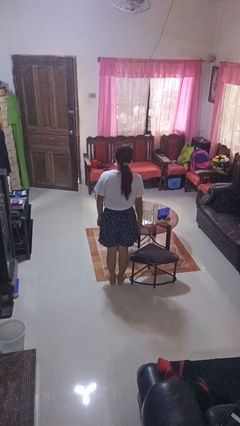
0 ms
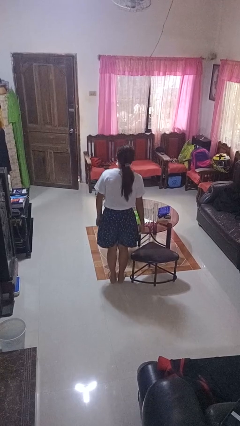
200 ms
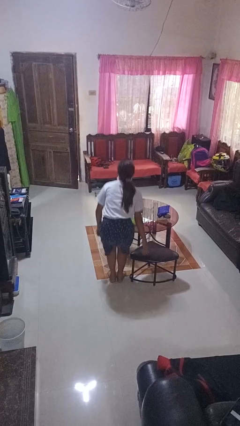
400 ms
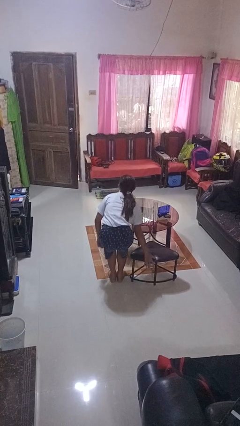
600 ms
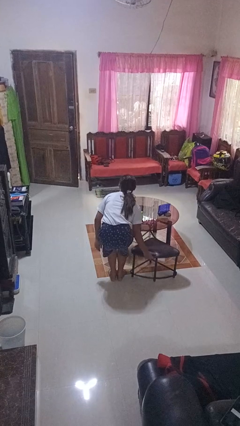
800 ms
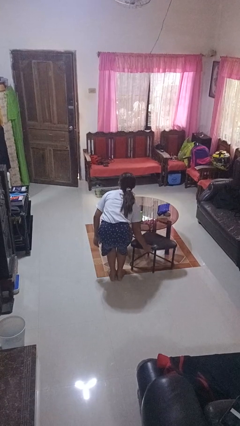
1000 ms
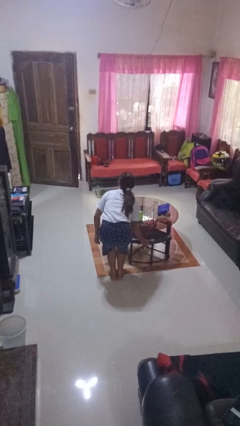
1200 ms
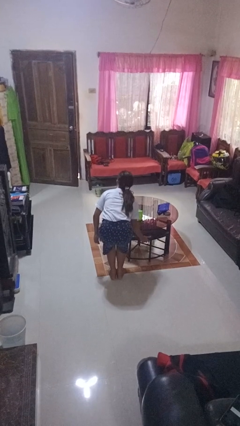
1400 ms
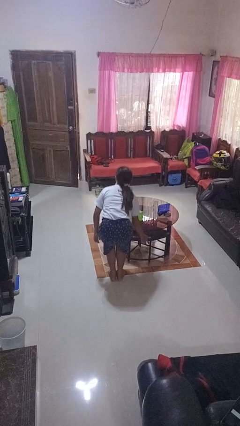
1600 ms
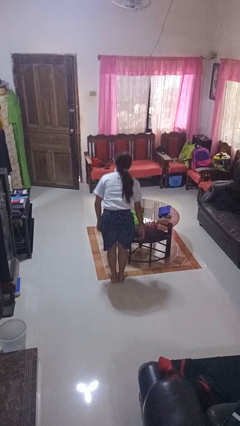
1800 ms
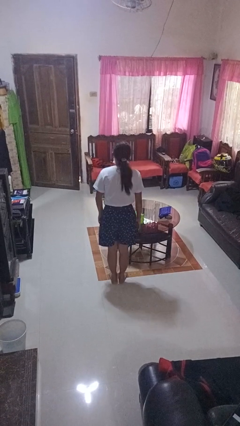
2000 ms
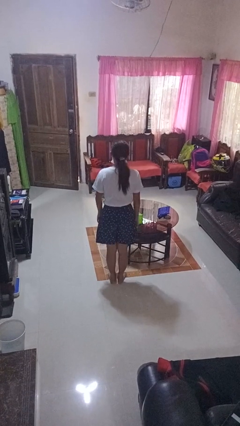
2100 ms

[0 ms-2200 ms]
person pushes in chair

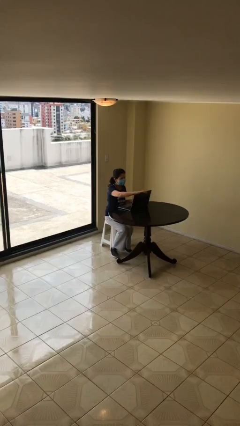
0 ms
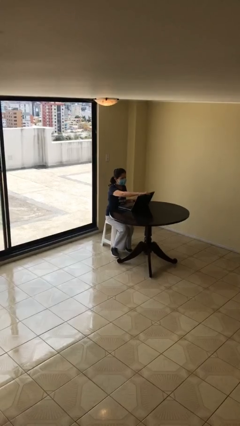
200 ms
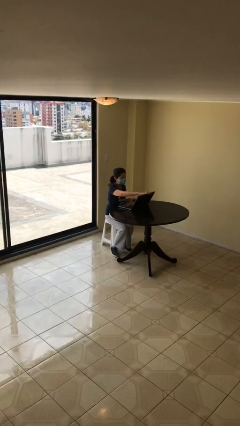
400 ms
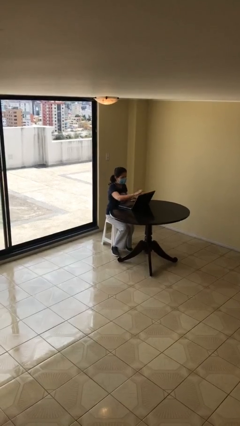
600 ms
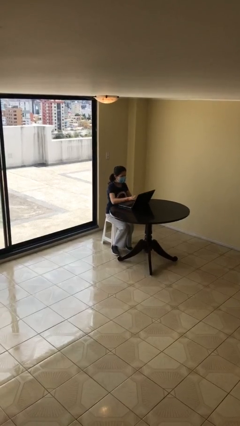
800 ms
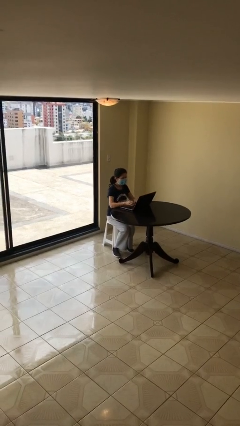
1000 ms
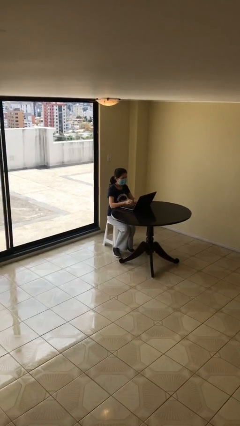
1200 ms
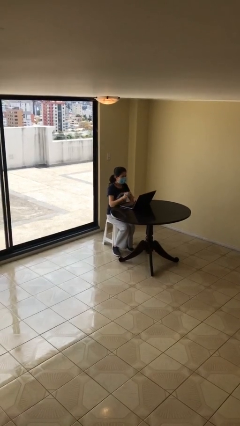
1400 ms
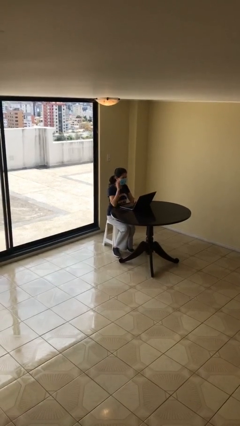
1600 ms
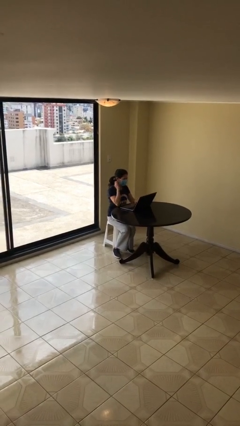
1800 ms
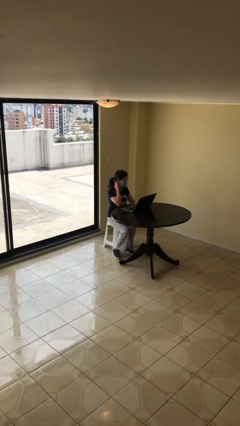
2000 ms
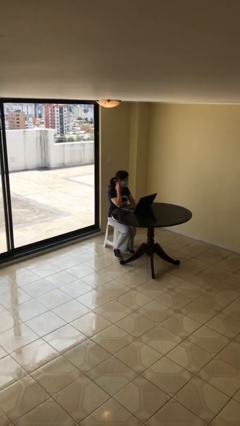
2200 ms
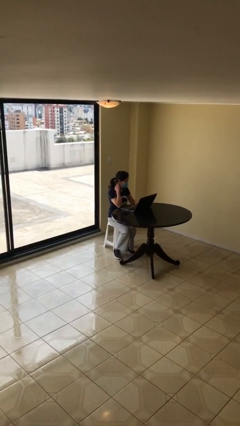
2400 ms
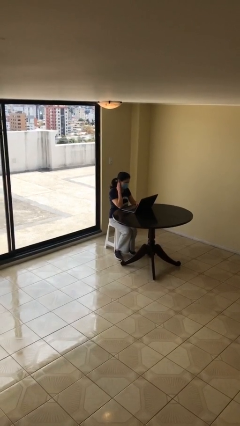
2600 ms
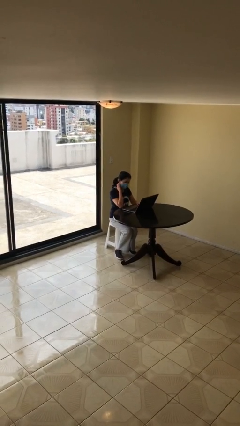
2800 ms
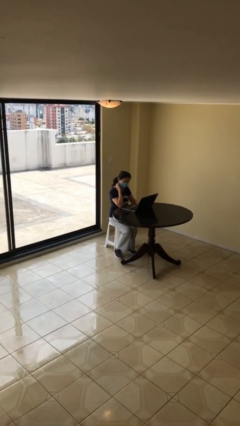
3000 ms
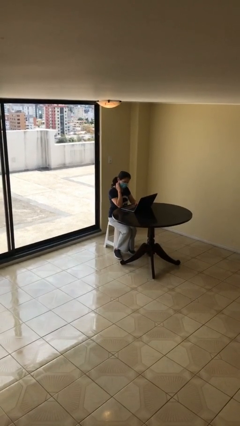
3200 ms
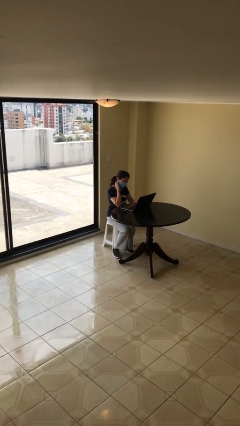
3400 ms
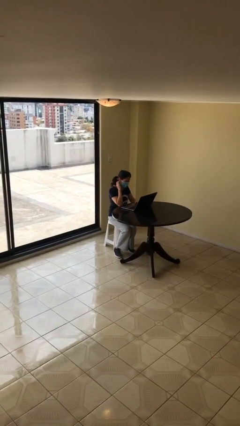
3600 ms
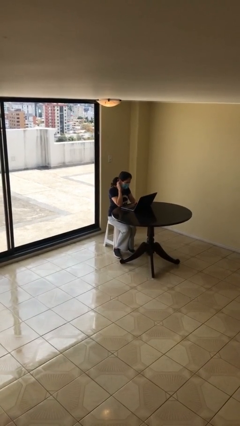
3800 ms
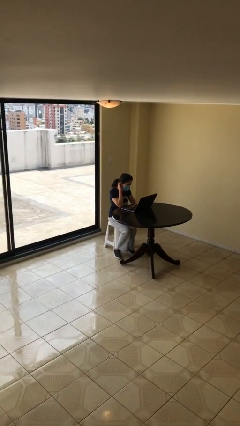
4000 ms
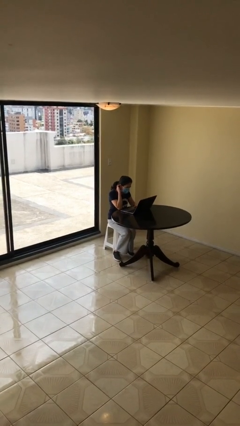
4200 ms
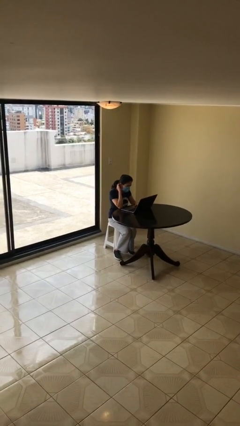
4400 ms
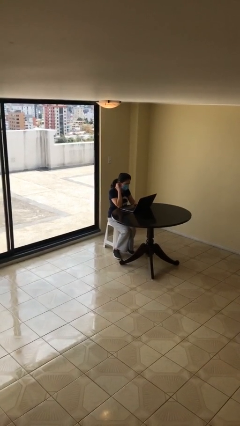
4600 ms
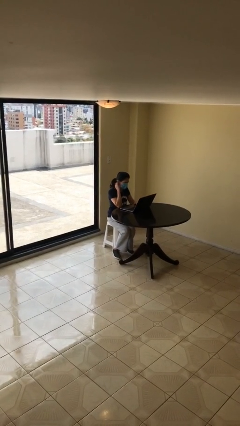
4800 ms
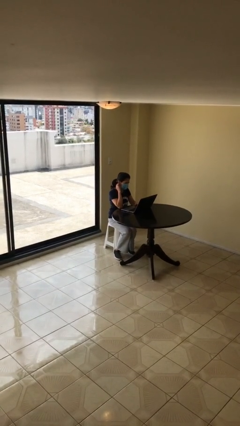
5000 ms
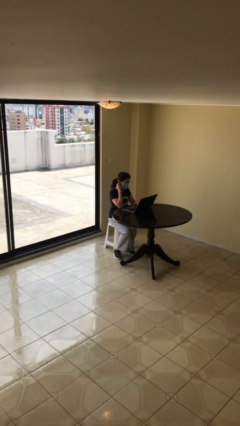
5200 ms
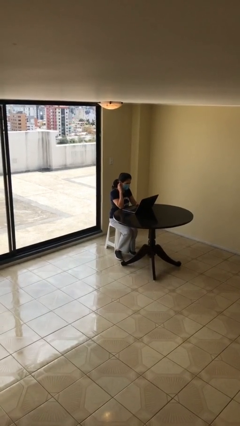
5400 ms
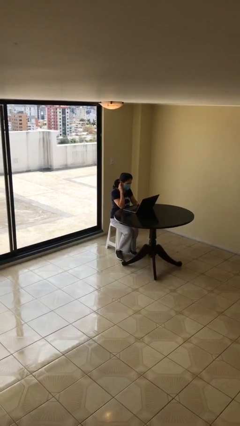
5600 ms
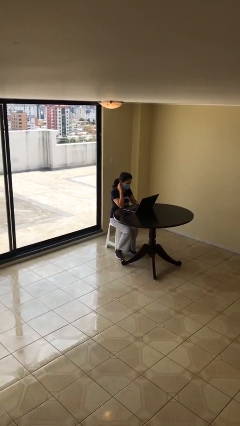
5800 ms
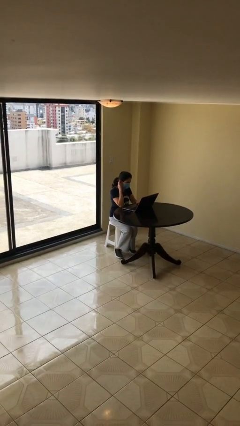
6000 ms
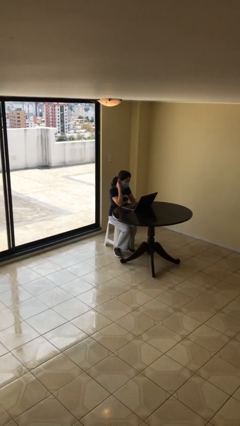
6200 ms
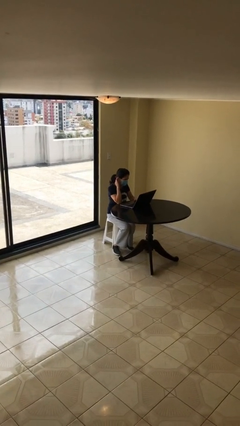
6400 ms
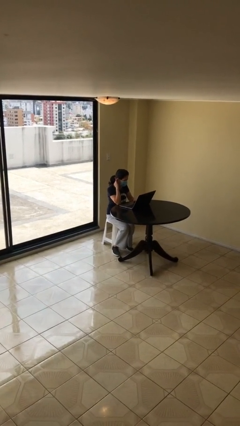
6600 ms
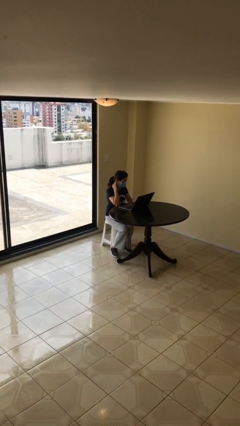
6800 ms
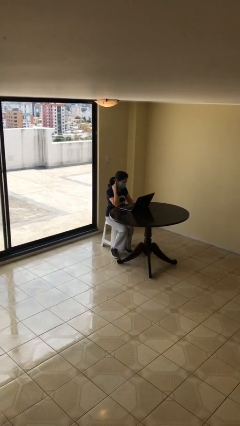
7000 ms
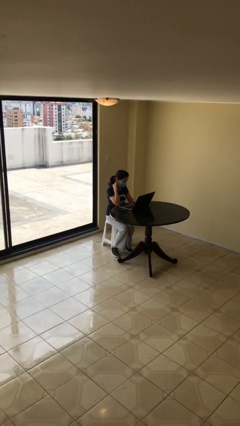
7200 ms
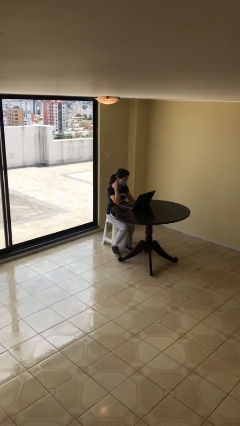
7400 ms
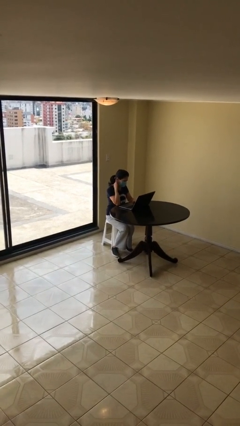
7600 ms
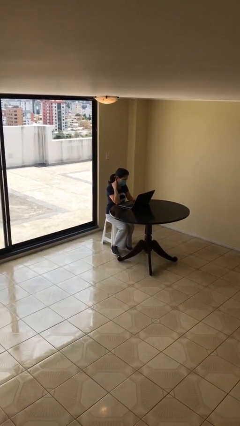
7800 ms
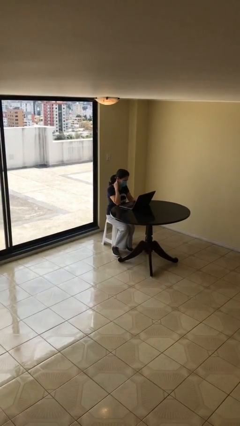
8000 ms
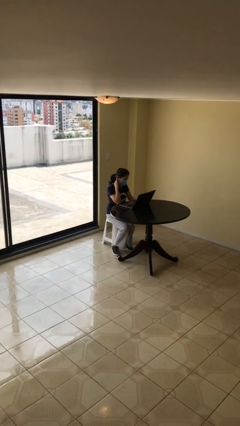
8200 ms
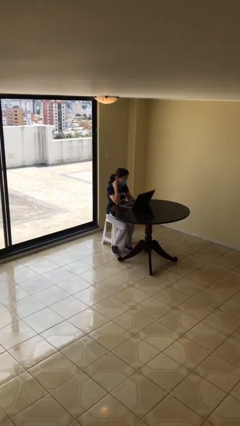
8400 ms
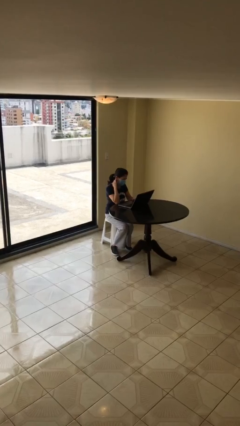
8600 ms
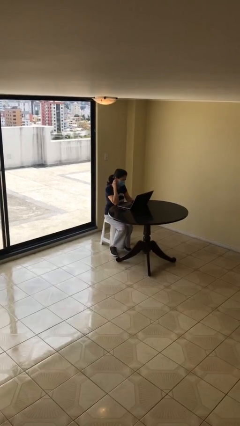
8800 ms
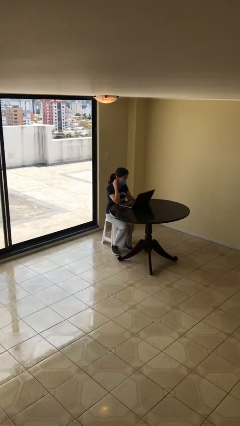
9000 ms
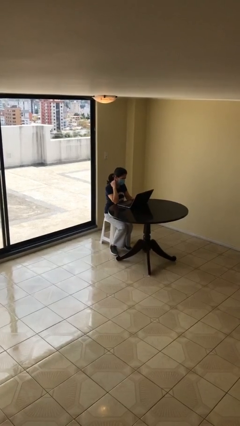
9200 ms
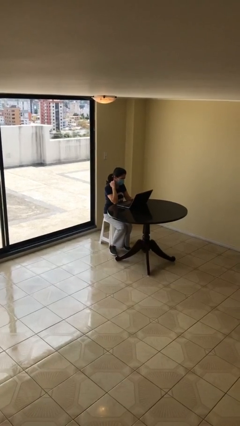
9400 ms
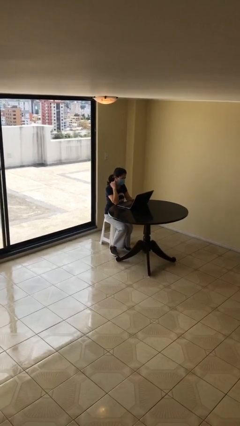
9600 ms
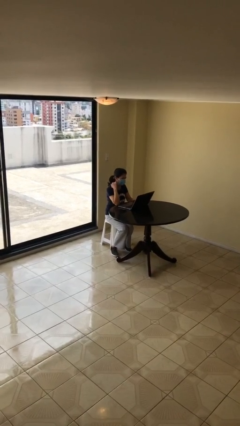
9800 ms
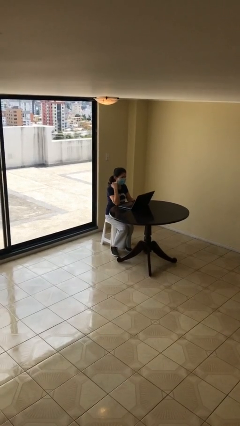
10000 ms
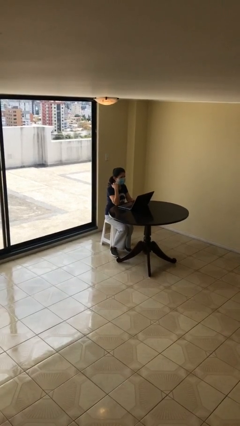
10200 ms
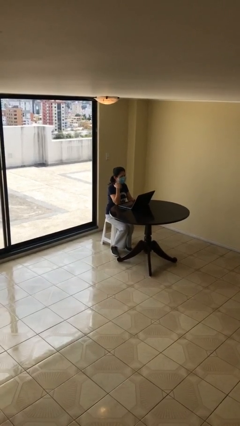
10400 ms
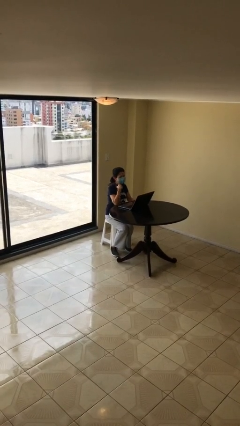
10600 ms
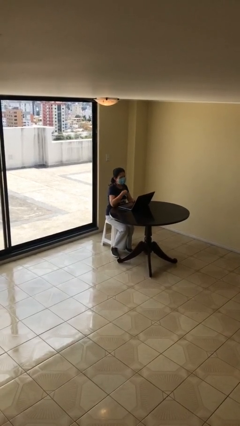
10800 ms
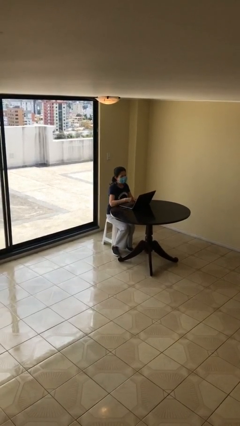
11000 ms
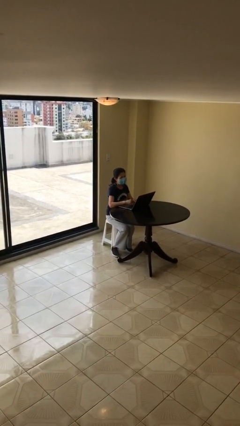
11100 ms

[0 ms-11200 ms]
person interacts with laptop

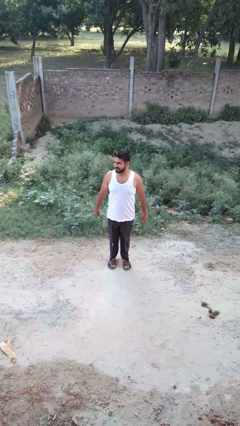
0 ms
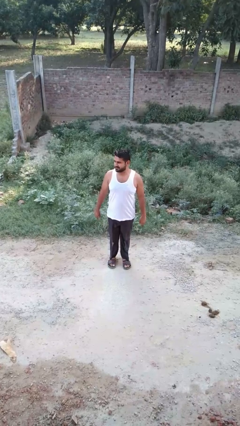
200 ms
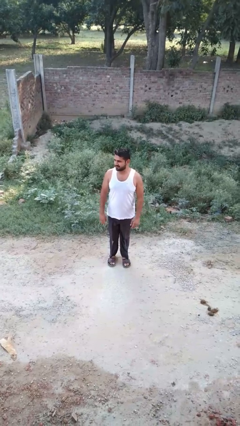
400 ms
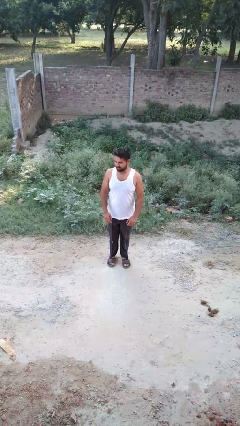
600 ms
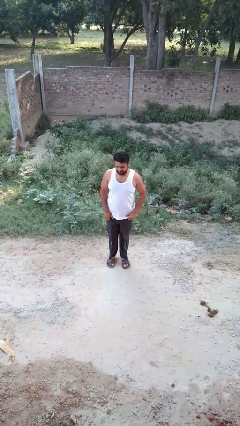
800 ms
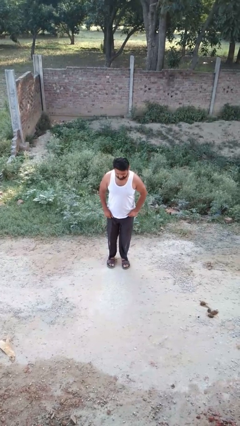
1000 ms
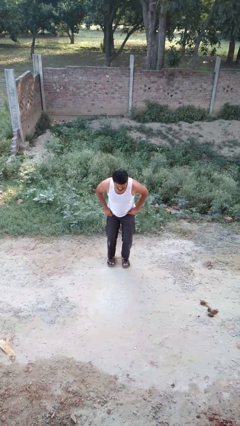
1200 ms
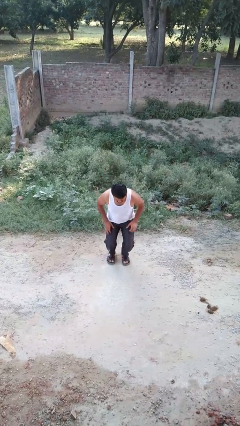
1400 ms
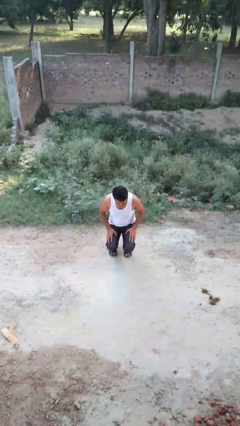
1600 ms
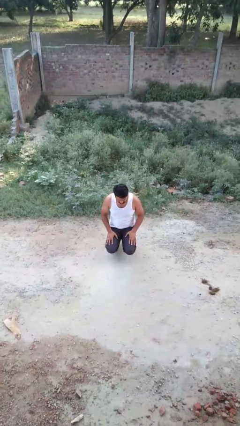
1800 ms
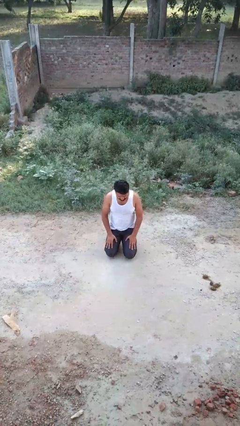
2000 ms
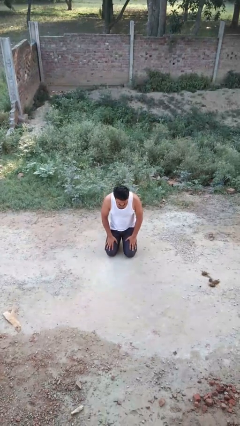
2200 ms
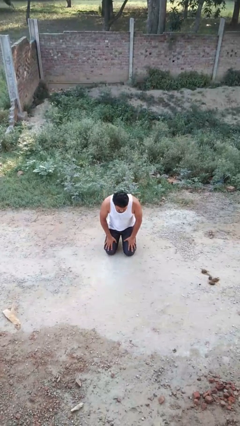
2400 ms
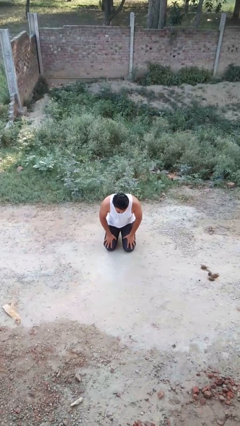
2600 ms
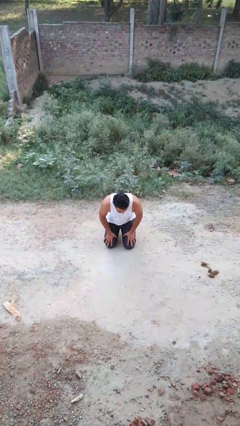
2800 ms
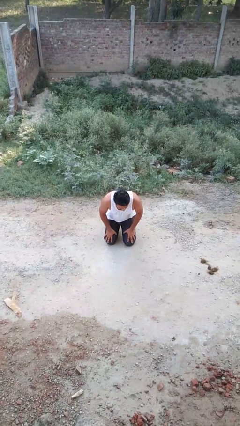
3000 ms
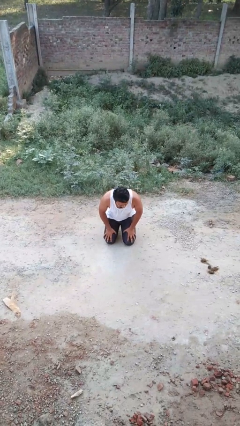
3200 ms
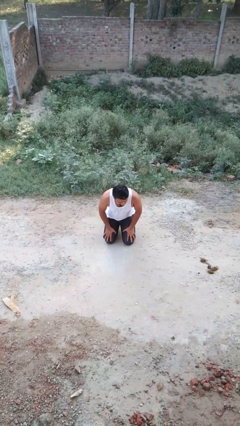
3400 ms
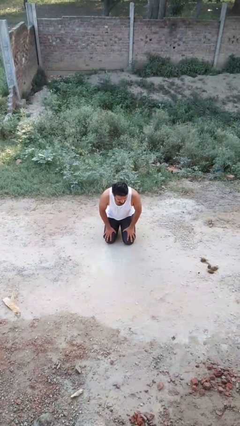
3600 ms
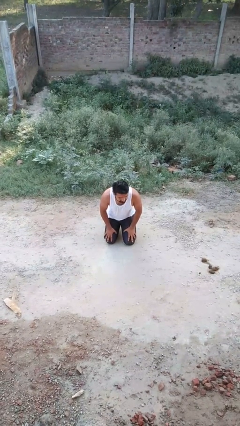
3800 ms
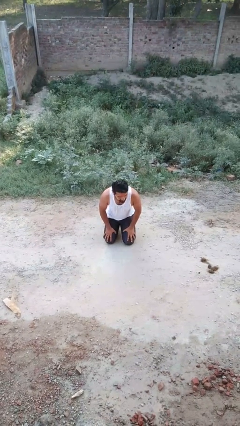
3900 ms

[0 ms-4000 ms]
person kneels

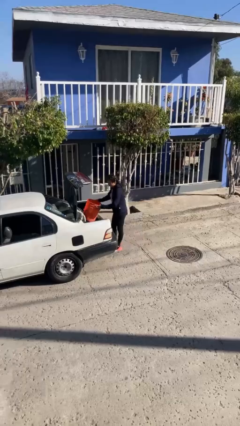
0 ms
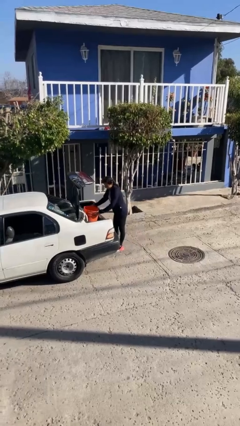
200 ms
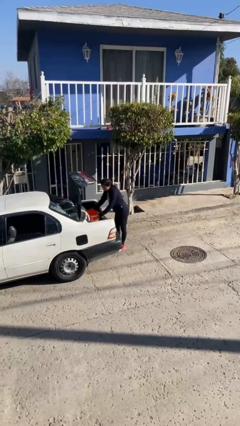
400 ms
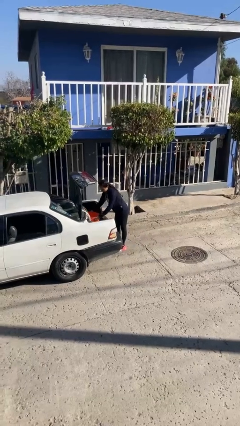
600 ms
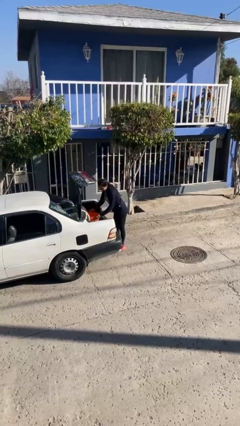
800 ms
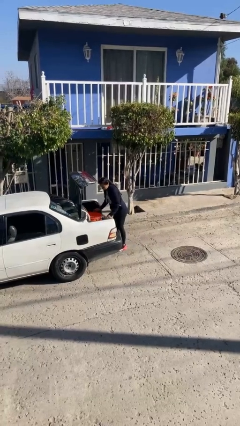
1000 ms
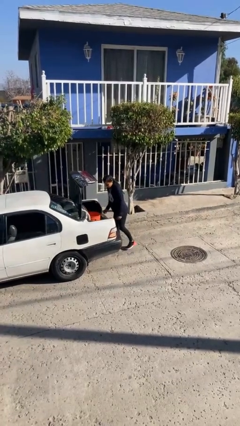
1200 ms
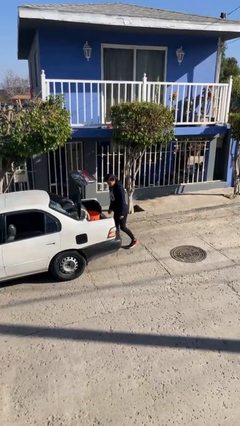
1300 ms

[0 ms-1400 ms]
person loads car
